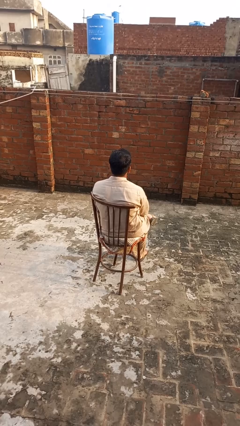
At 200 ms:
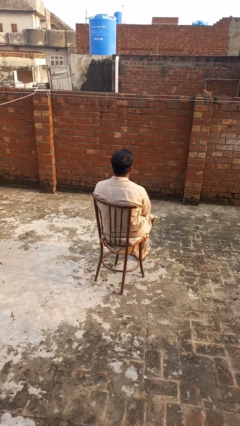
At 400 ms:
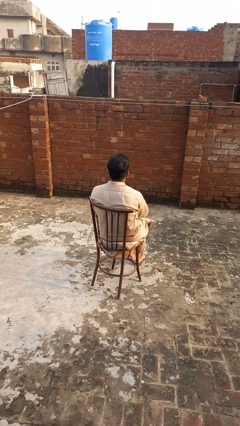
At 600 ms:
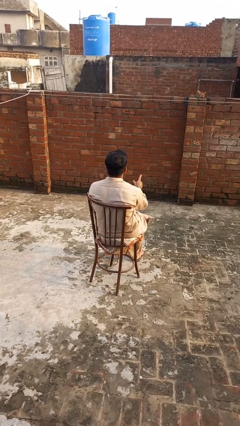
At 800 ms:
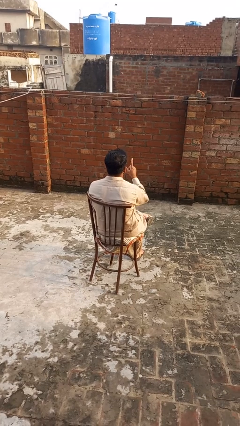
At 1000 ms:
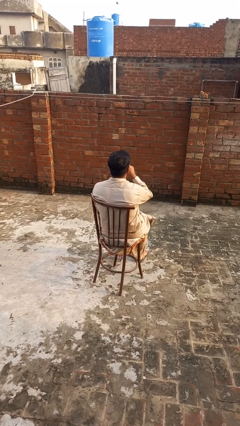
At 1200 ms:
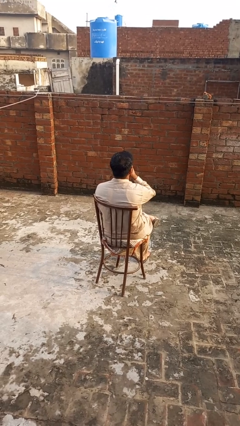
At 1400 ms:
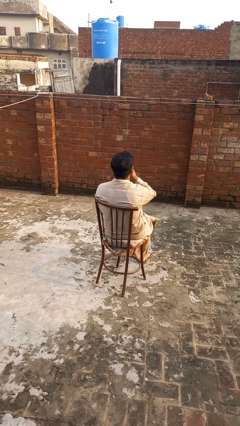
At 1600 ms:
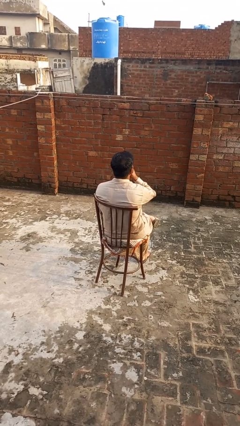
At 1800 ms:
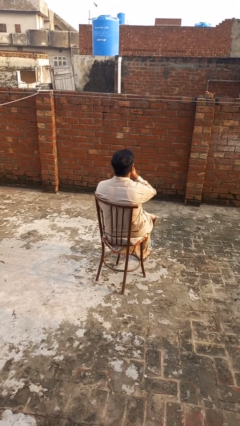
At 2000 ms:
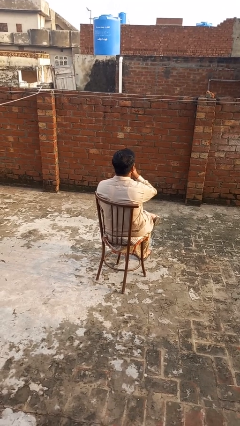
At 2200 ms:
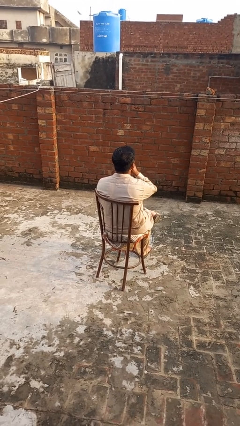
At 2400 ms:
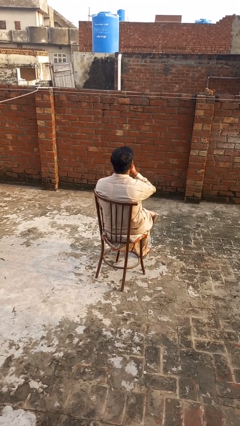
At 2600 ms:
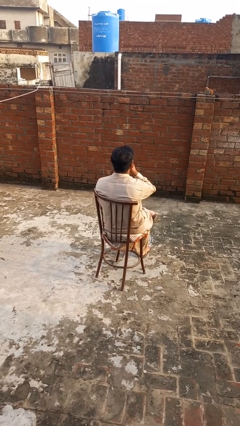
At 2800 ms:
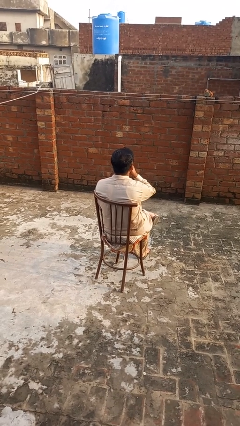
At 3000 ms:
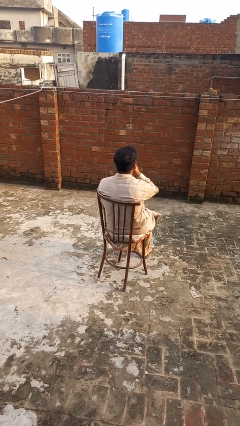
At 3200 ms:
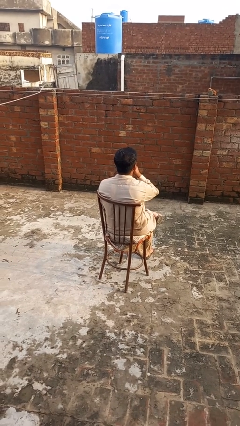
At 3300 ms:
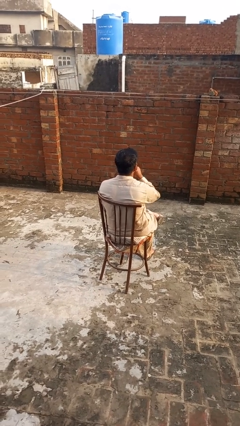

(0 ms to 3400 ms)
person gestures be quiet

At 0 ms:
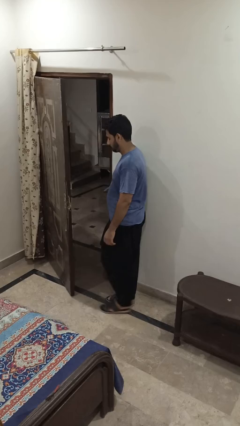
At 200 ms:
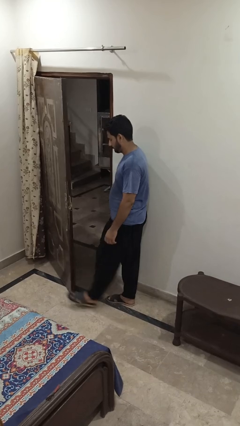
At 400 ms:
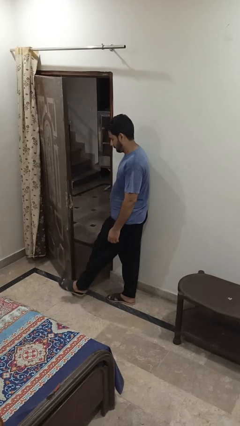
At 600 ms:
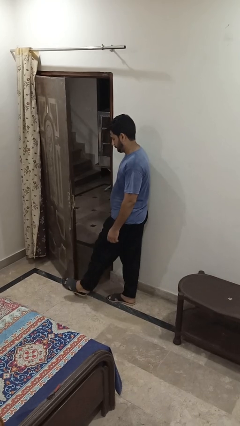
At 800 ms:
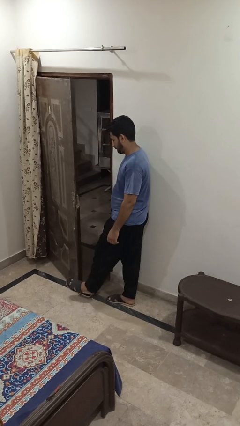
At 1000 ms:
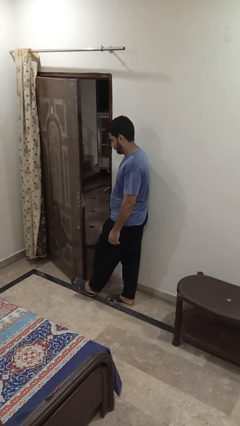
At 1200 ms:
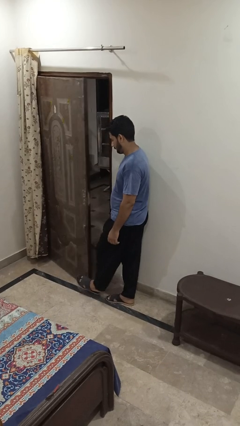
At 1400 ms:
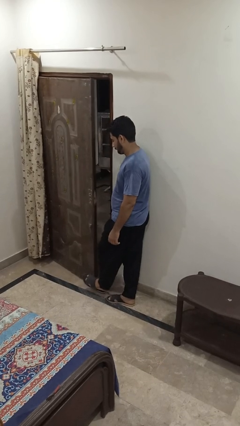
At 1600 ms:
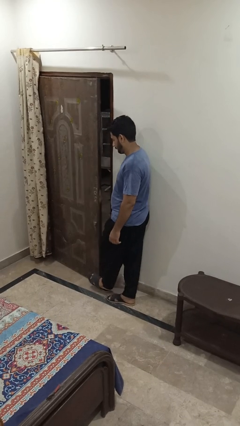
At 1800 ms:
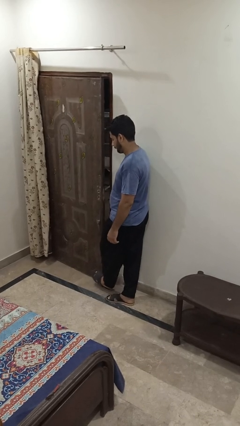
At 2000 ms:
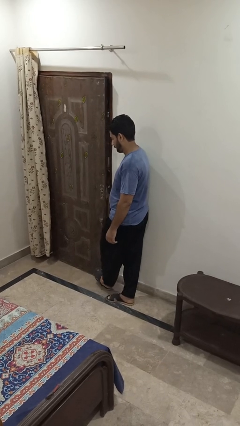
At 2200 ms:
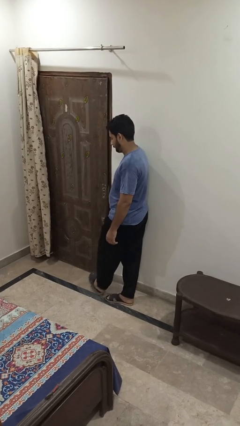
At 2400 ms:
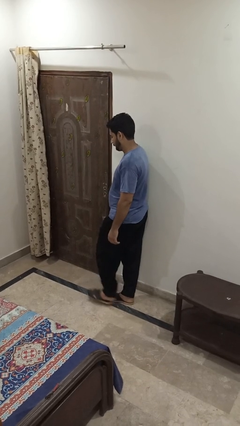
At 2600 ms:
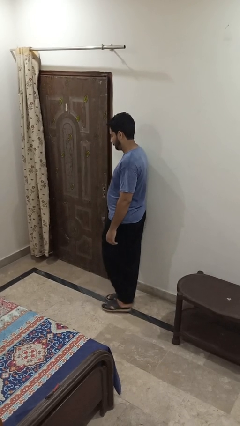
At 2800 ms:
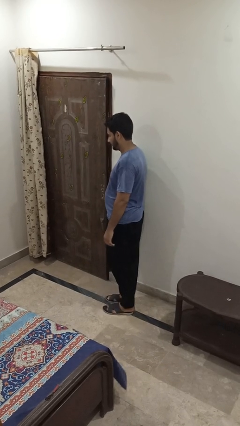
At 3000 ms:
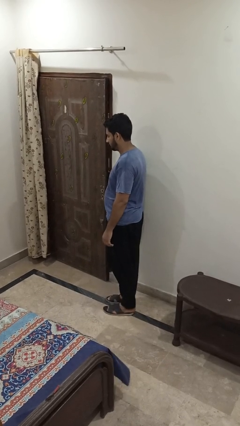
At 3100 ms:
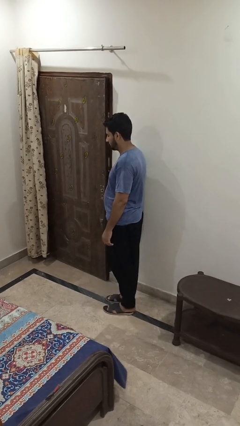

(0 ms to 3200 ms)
person closes door with foot

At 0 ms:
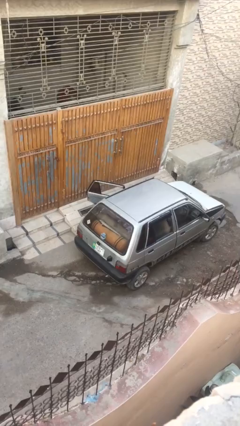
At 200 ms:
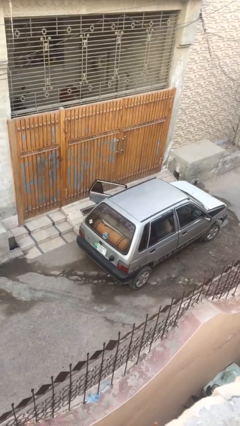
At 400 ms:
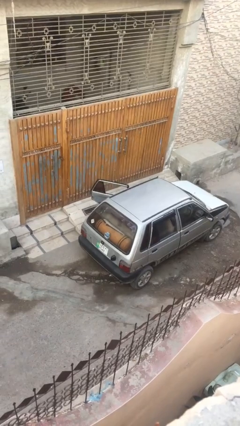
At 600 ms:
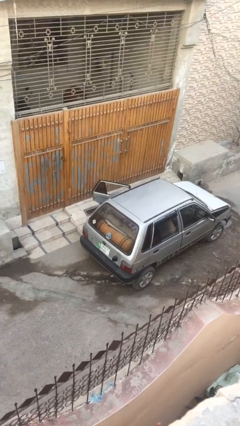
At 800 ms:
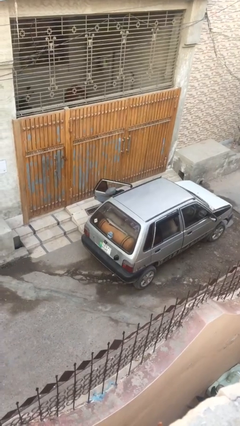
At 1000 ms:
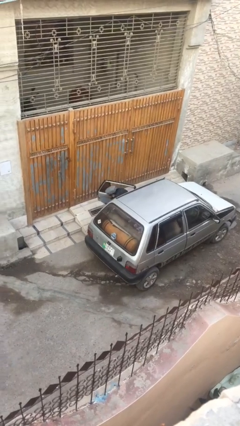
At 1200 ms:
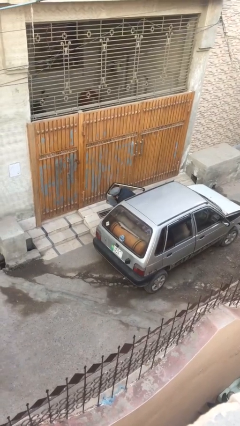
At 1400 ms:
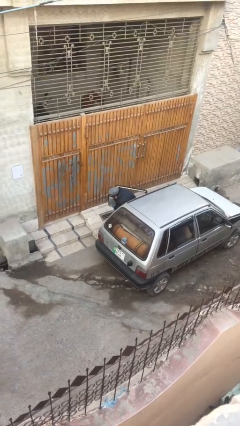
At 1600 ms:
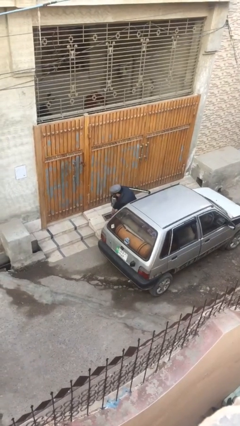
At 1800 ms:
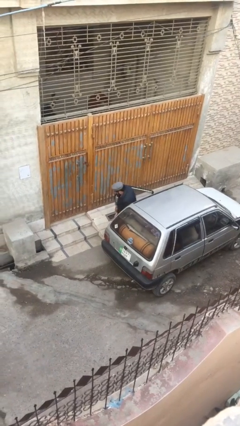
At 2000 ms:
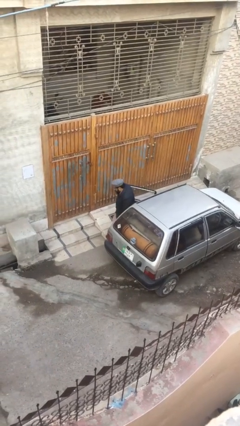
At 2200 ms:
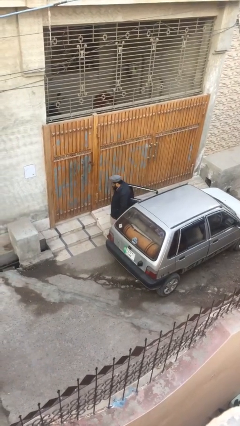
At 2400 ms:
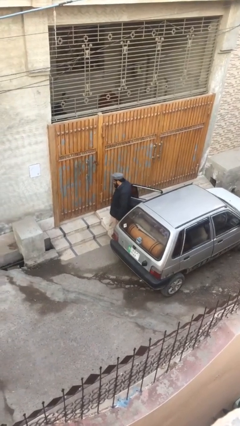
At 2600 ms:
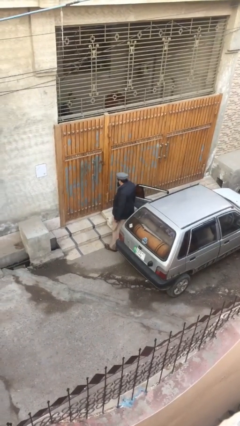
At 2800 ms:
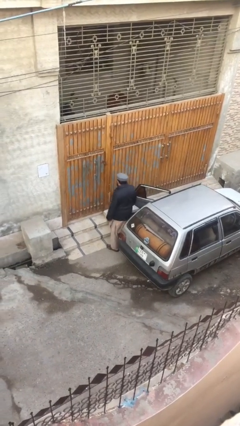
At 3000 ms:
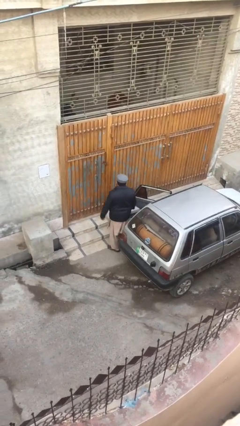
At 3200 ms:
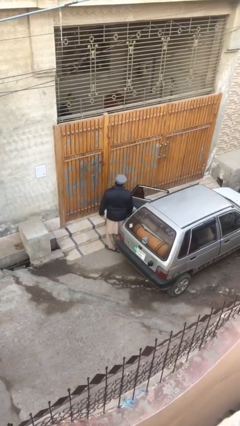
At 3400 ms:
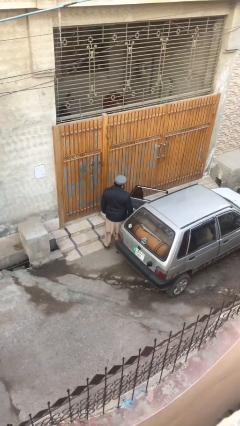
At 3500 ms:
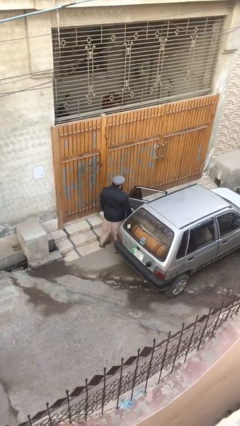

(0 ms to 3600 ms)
person exits car

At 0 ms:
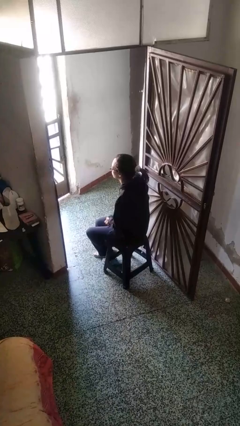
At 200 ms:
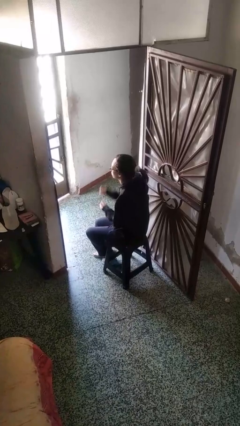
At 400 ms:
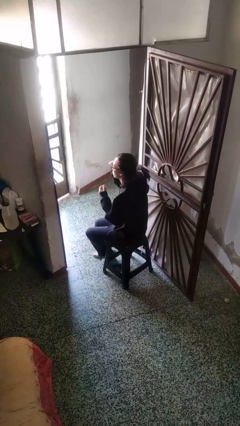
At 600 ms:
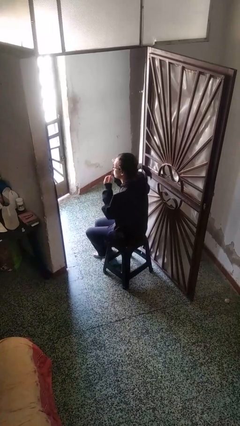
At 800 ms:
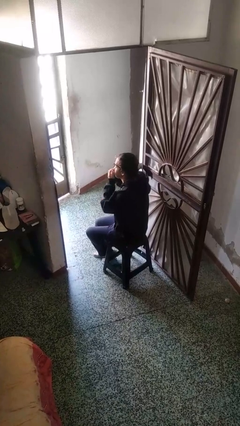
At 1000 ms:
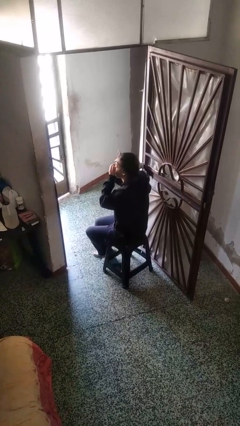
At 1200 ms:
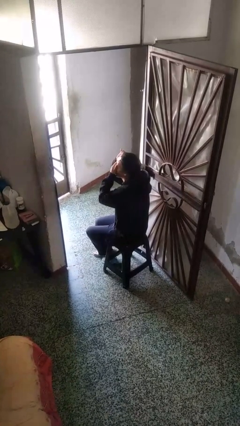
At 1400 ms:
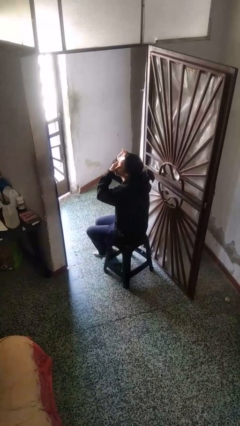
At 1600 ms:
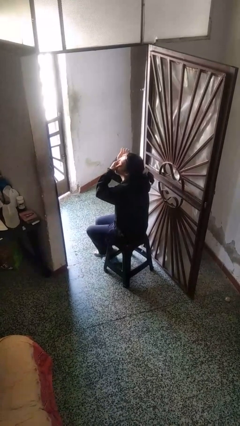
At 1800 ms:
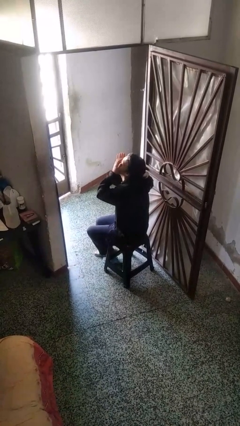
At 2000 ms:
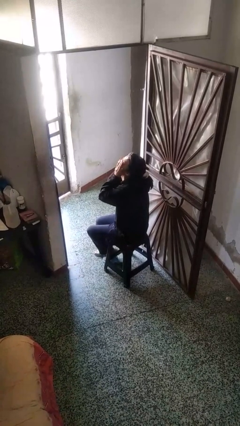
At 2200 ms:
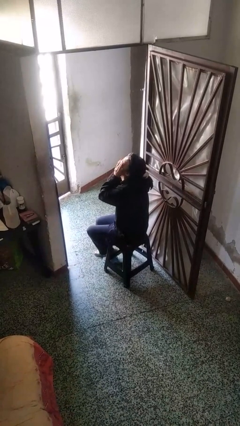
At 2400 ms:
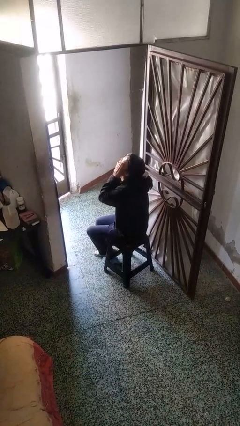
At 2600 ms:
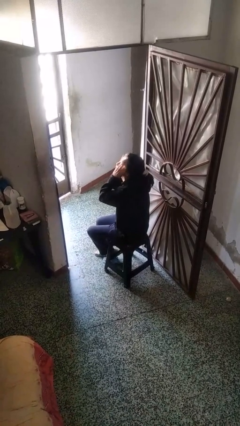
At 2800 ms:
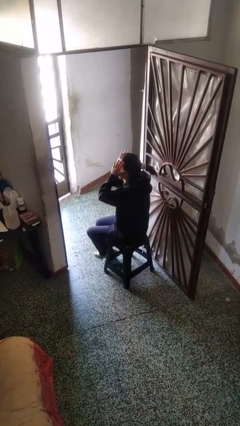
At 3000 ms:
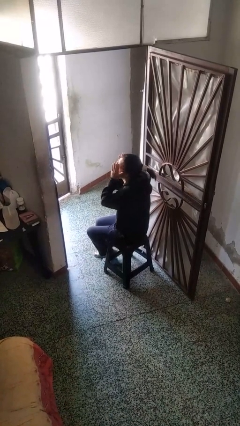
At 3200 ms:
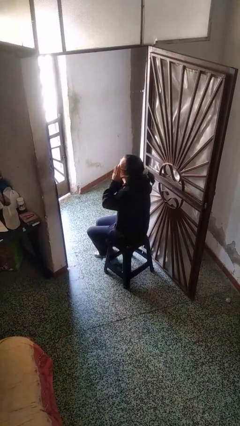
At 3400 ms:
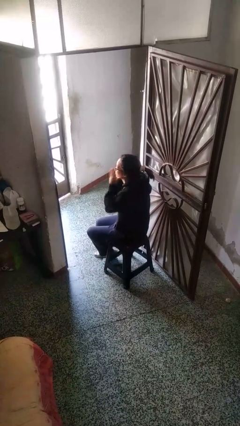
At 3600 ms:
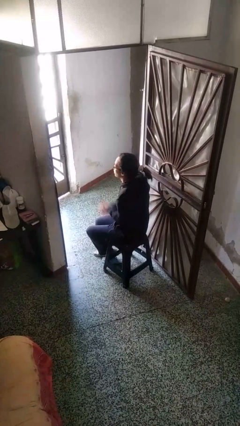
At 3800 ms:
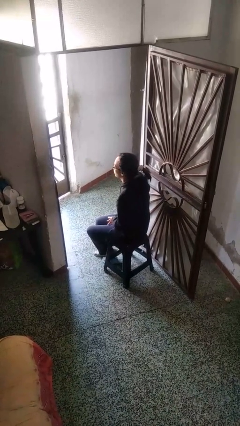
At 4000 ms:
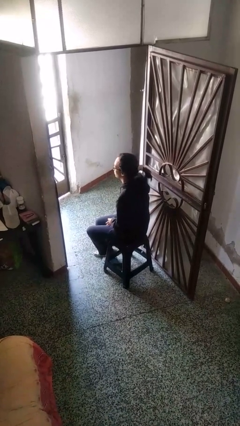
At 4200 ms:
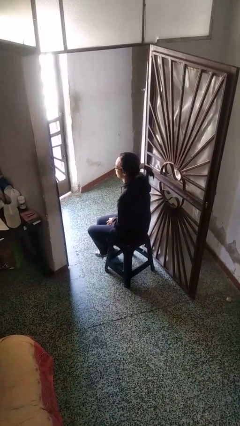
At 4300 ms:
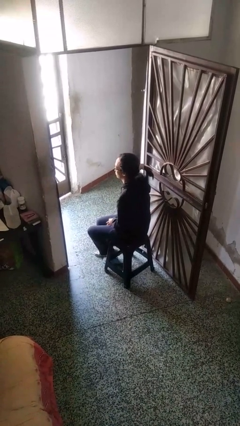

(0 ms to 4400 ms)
person rubs eyes

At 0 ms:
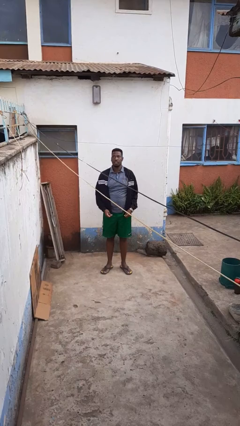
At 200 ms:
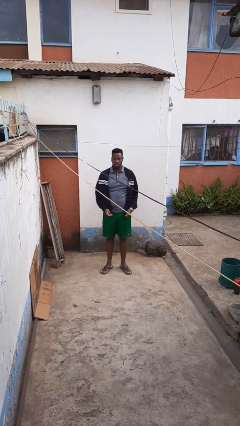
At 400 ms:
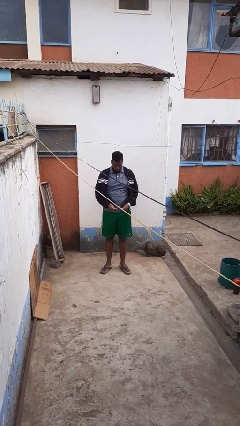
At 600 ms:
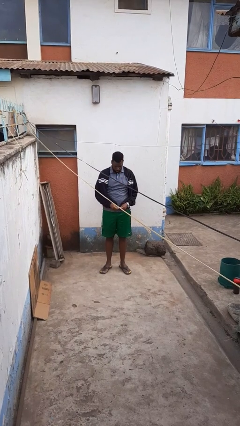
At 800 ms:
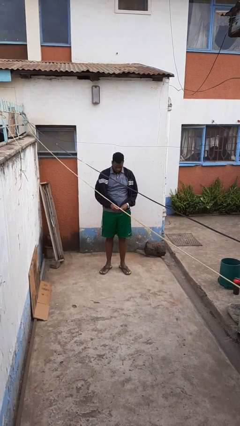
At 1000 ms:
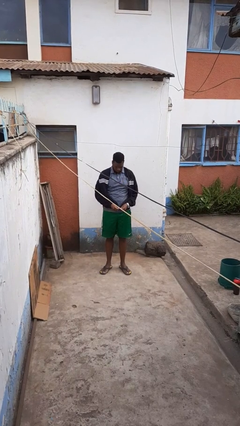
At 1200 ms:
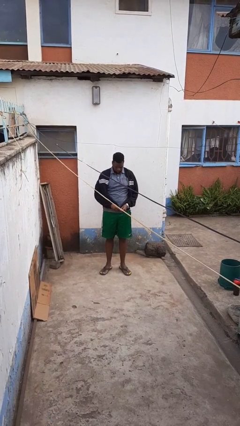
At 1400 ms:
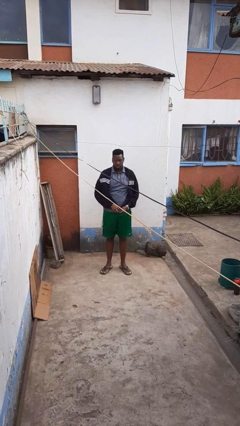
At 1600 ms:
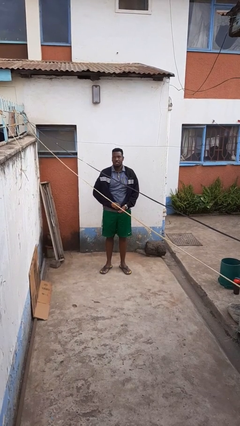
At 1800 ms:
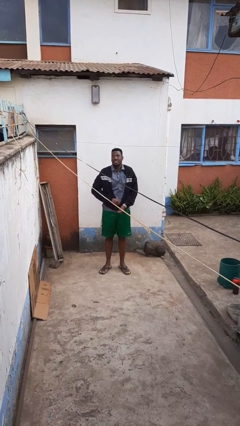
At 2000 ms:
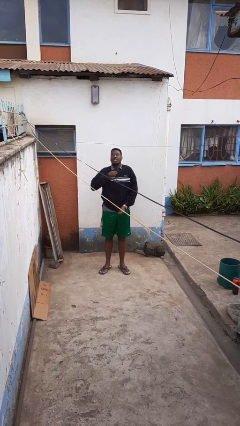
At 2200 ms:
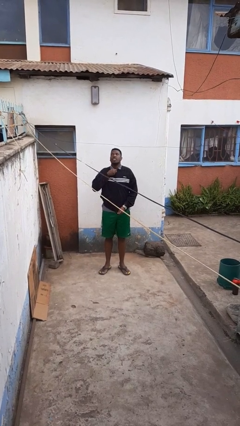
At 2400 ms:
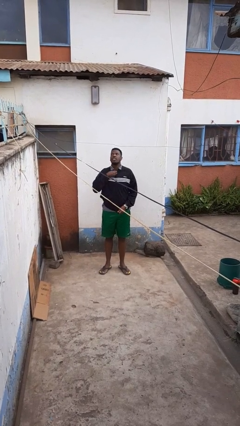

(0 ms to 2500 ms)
person zips up jacket

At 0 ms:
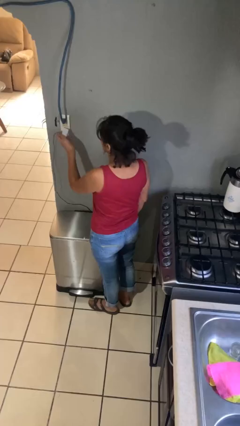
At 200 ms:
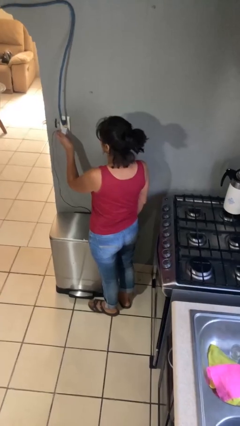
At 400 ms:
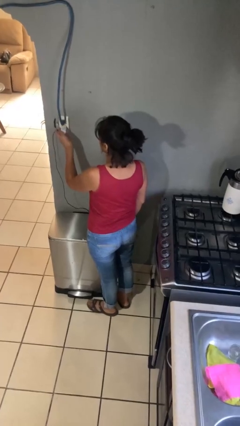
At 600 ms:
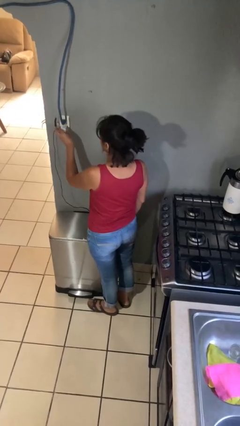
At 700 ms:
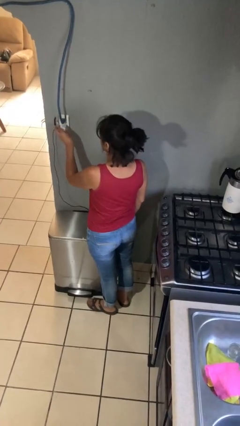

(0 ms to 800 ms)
person plugs into electrical socket
